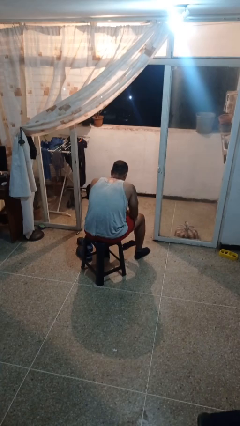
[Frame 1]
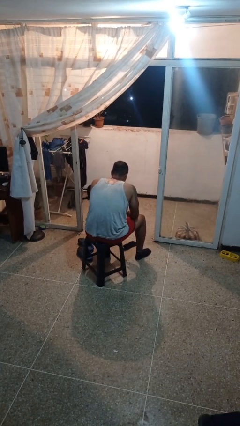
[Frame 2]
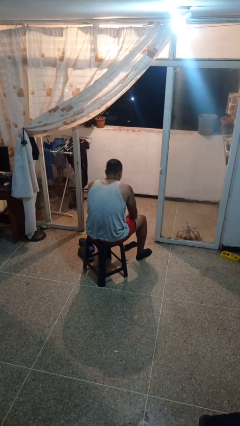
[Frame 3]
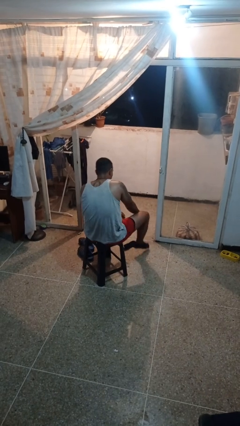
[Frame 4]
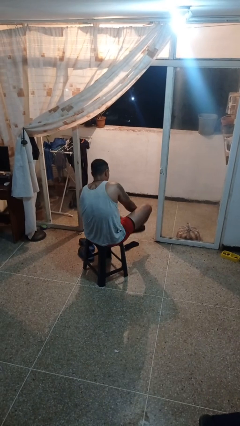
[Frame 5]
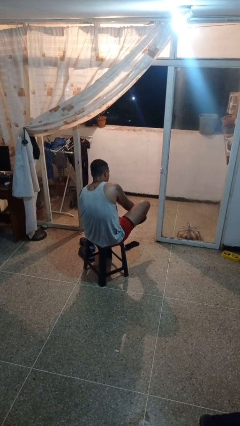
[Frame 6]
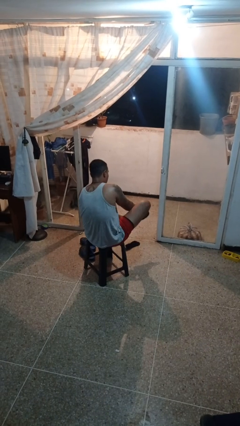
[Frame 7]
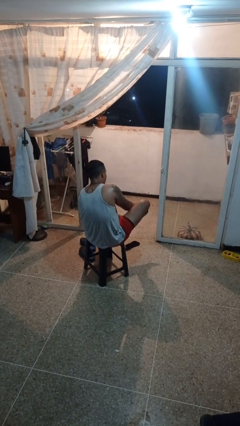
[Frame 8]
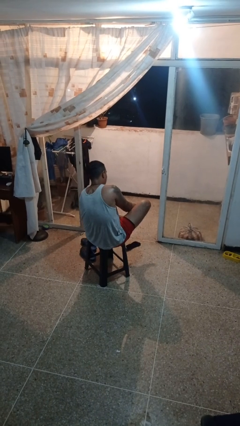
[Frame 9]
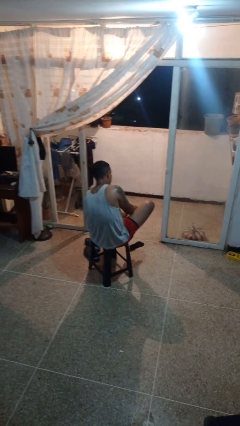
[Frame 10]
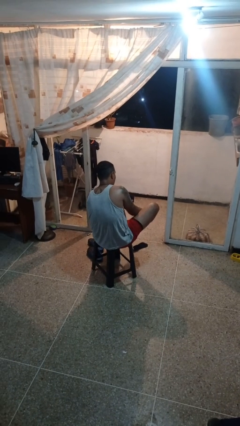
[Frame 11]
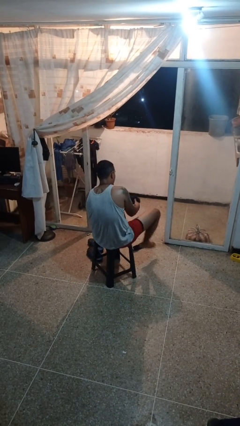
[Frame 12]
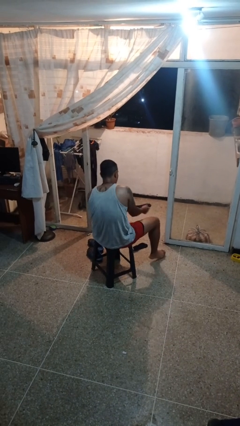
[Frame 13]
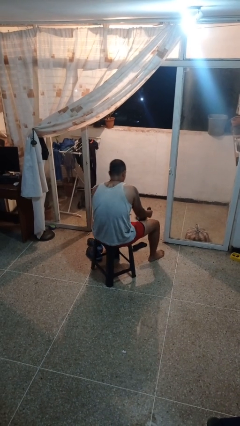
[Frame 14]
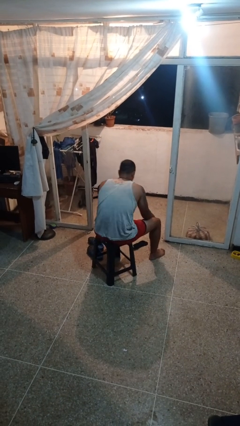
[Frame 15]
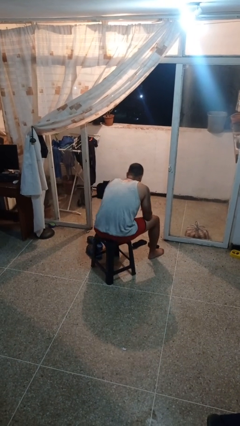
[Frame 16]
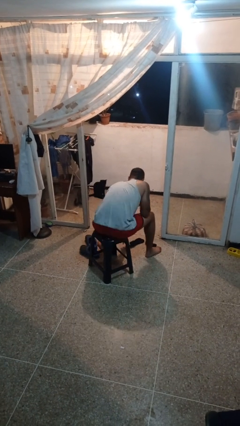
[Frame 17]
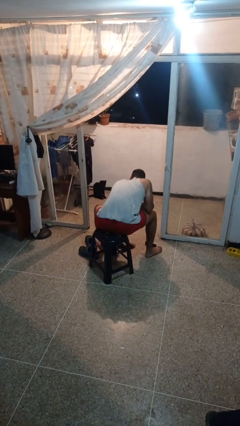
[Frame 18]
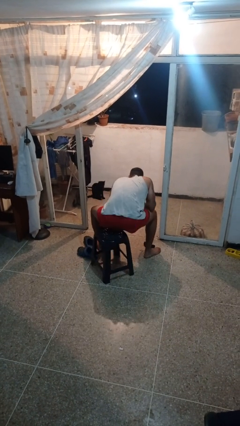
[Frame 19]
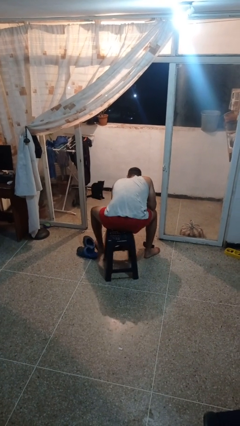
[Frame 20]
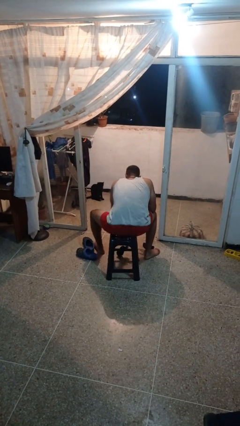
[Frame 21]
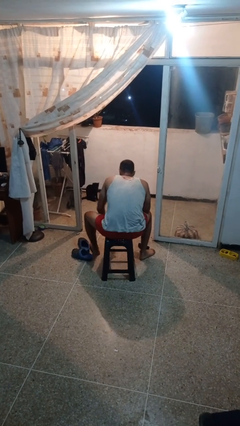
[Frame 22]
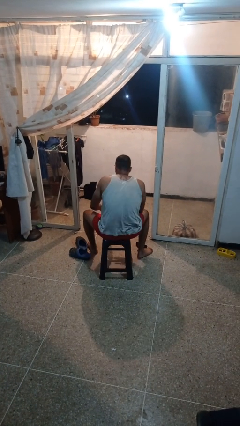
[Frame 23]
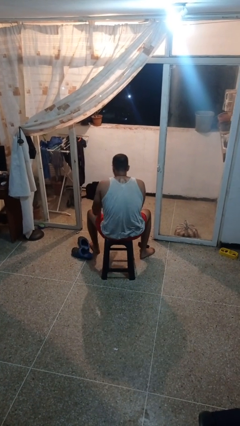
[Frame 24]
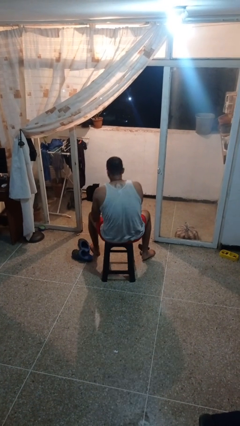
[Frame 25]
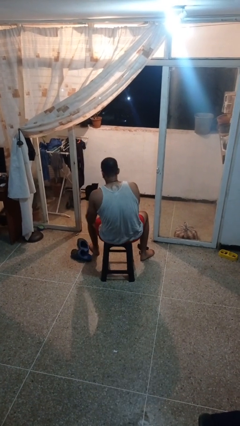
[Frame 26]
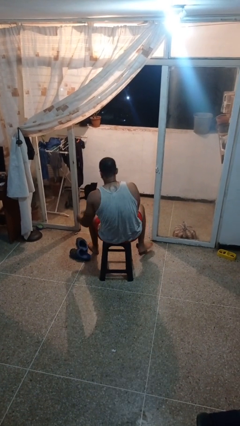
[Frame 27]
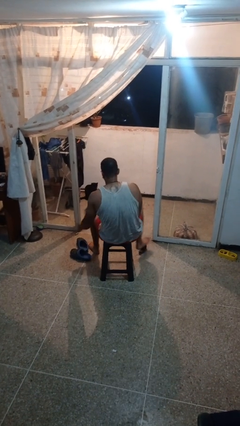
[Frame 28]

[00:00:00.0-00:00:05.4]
person takes off socks

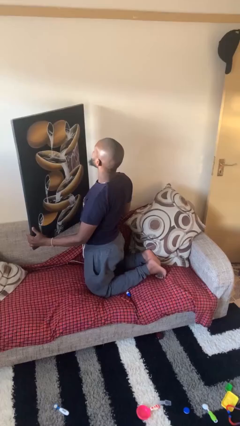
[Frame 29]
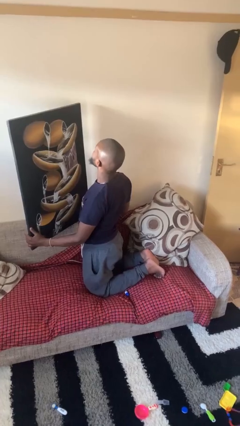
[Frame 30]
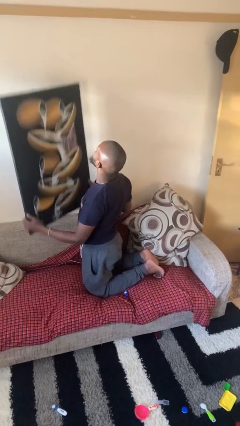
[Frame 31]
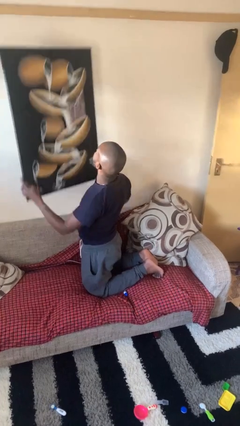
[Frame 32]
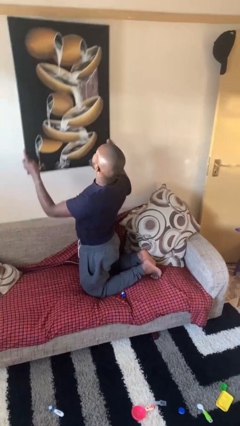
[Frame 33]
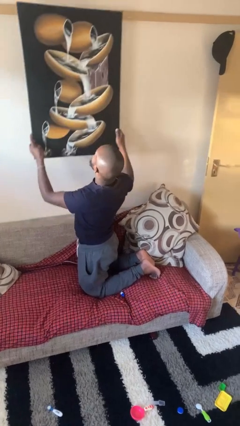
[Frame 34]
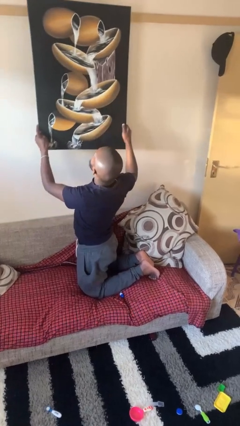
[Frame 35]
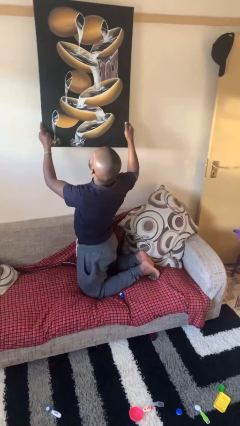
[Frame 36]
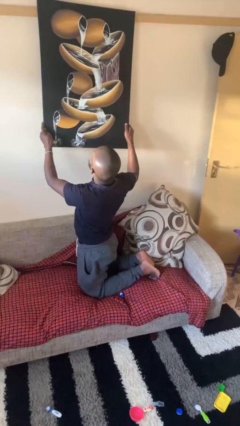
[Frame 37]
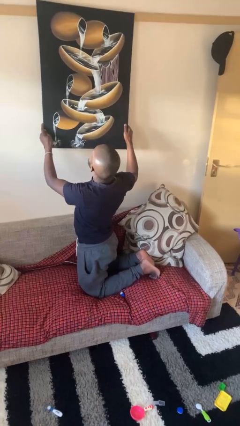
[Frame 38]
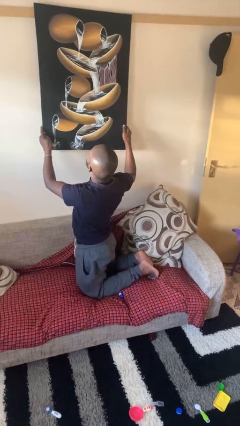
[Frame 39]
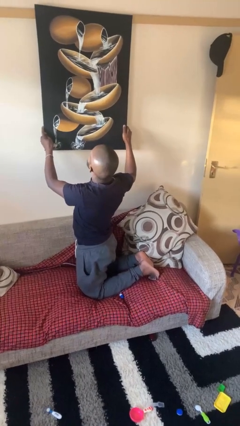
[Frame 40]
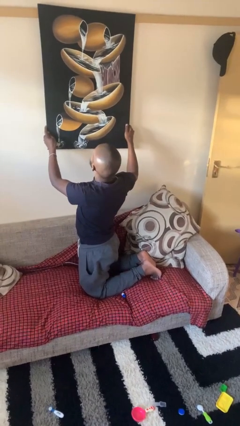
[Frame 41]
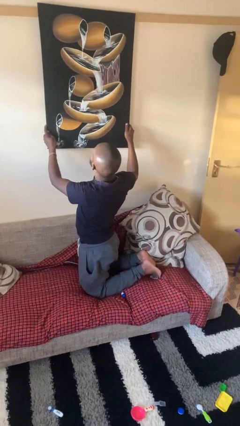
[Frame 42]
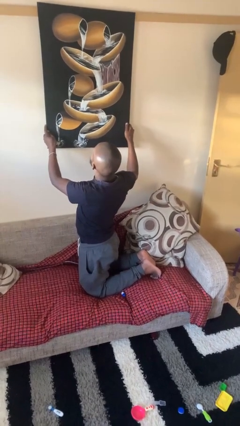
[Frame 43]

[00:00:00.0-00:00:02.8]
person puts up picture frame

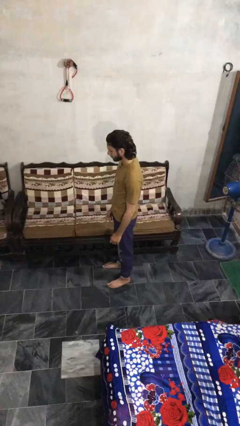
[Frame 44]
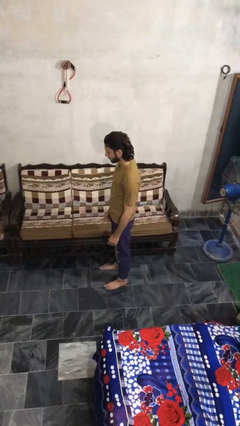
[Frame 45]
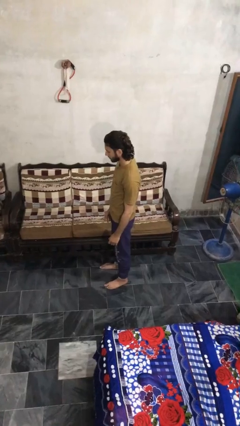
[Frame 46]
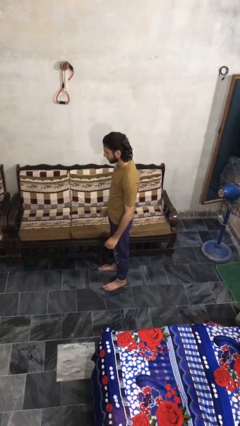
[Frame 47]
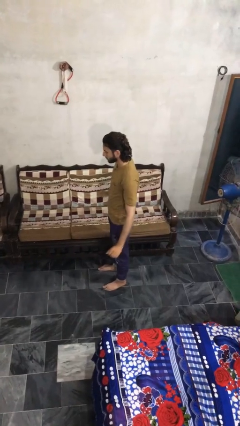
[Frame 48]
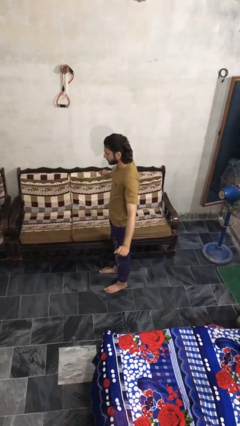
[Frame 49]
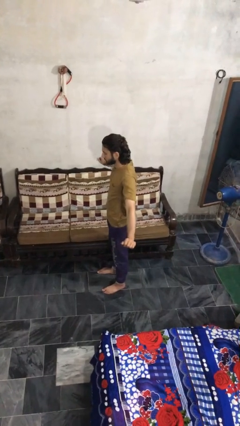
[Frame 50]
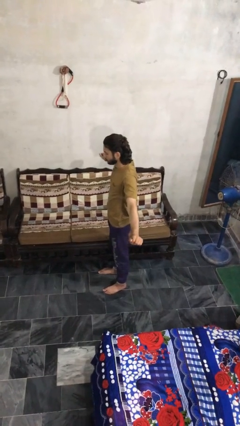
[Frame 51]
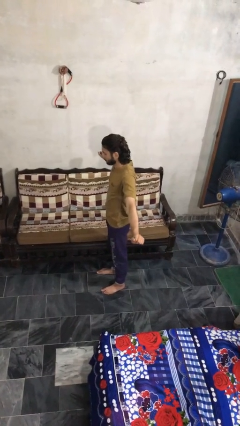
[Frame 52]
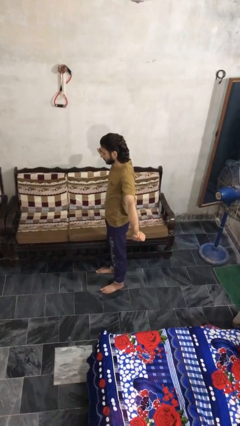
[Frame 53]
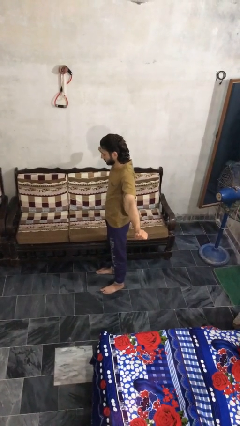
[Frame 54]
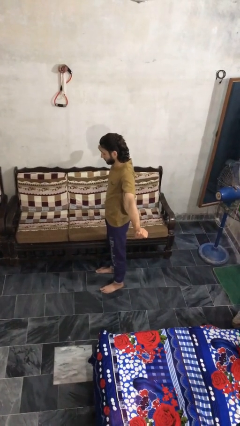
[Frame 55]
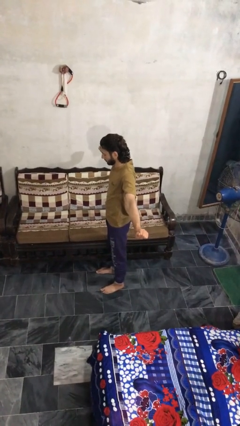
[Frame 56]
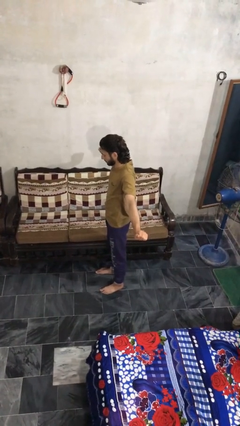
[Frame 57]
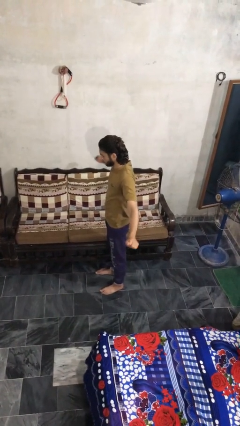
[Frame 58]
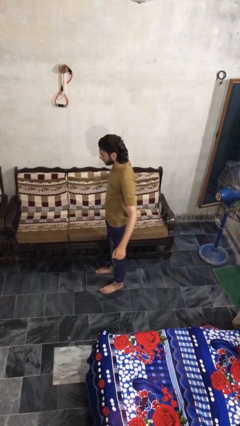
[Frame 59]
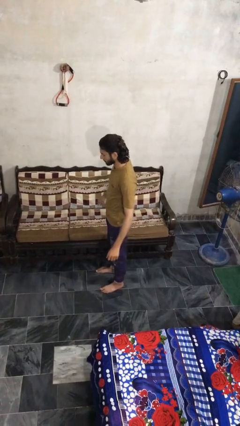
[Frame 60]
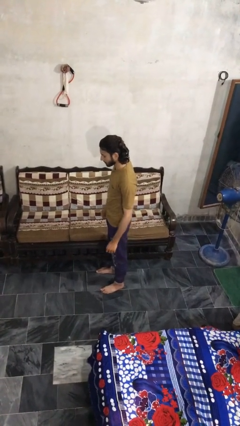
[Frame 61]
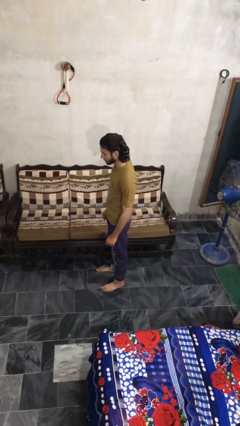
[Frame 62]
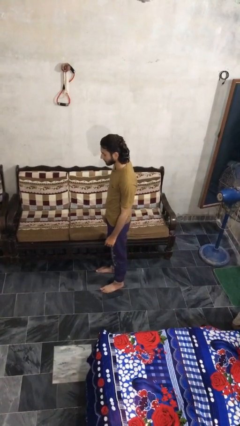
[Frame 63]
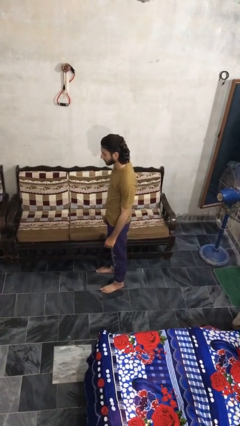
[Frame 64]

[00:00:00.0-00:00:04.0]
person stretches arms to side

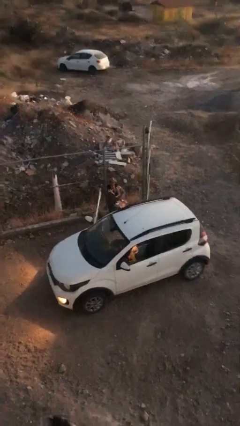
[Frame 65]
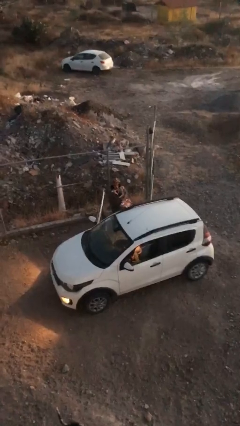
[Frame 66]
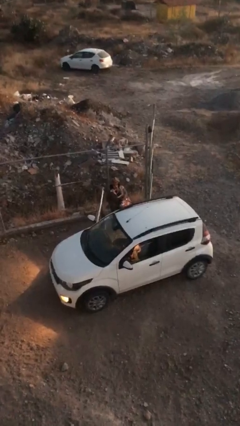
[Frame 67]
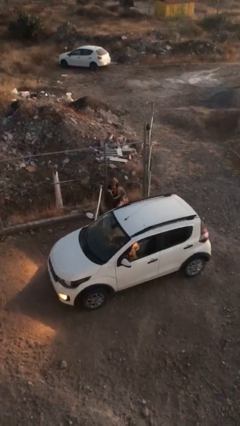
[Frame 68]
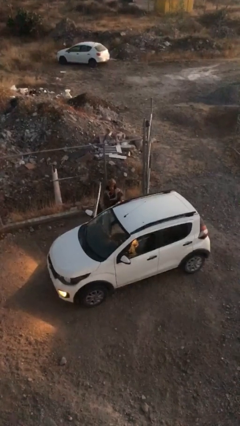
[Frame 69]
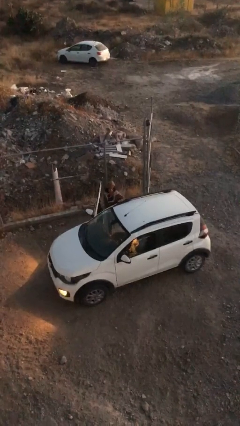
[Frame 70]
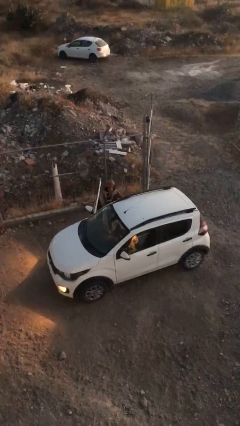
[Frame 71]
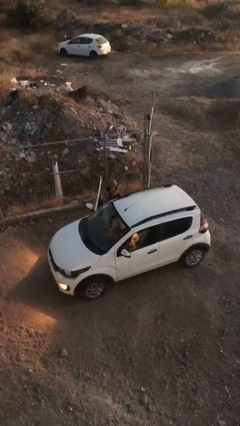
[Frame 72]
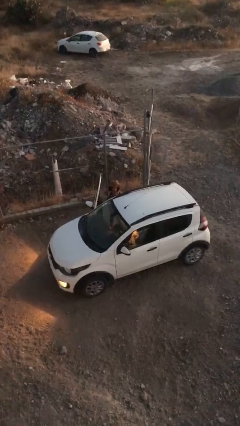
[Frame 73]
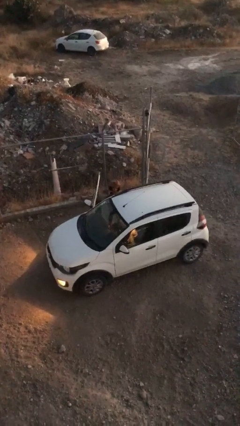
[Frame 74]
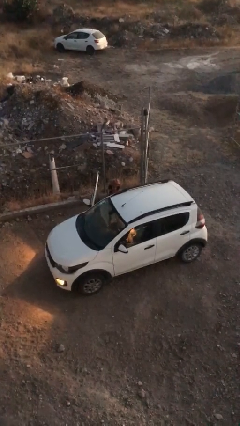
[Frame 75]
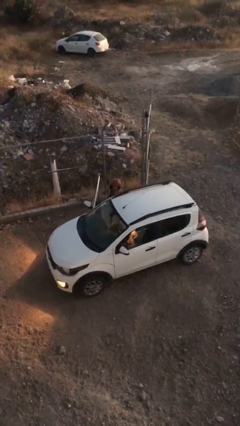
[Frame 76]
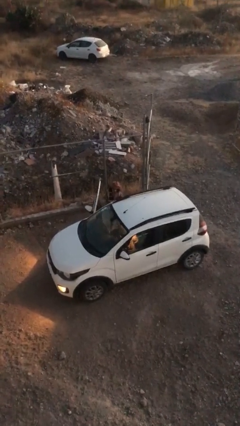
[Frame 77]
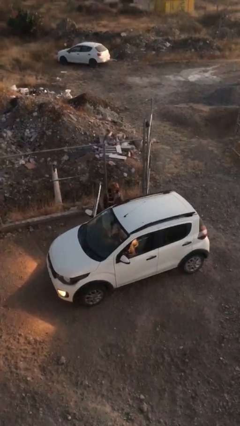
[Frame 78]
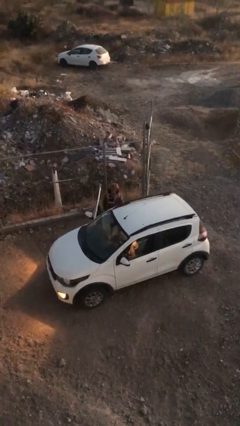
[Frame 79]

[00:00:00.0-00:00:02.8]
person loads car

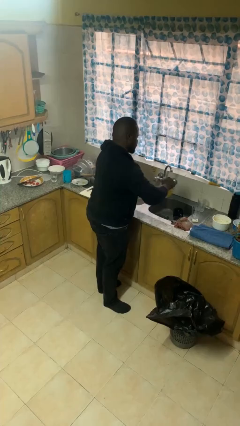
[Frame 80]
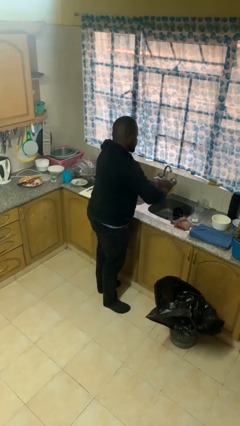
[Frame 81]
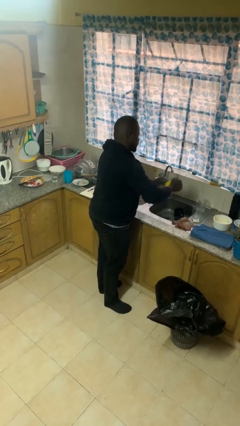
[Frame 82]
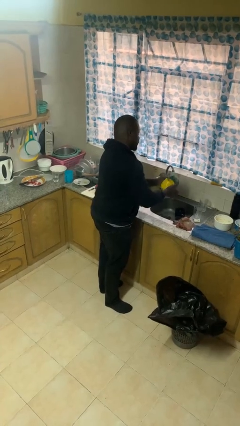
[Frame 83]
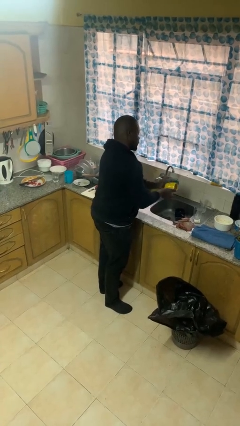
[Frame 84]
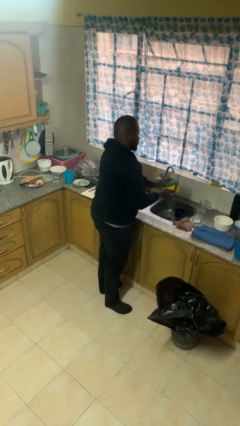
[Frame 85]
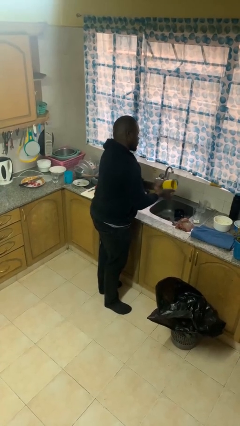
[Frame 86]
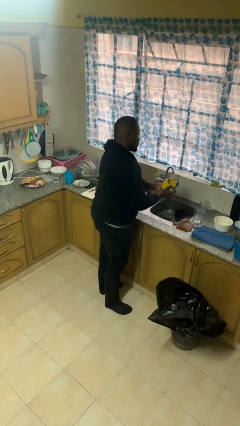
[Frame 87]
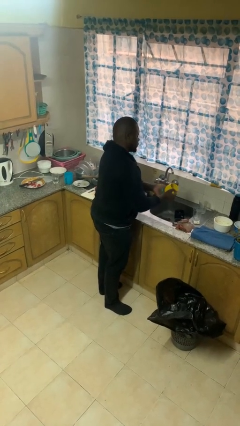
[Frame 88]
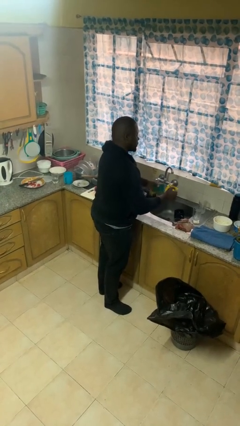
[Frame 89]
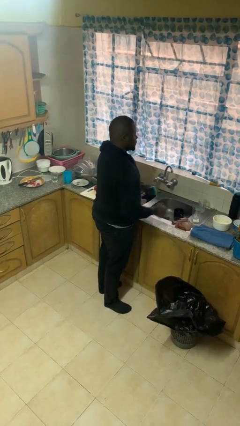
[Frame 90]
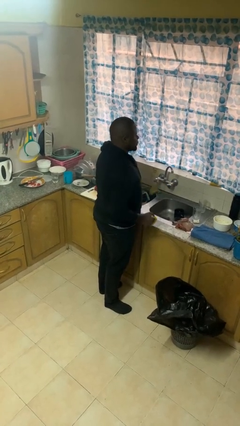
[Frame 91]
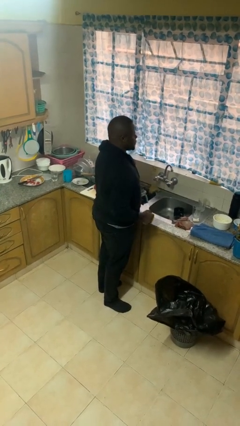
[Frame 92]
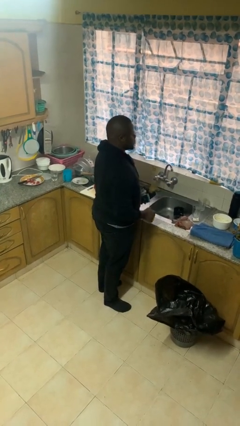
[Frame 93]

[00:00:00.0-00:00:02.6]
person washes dish

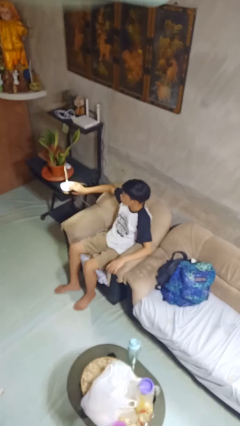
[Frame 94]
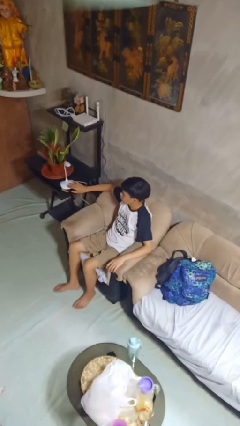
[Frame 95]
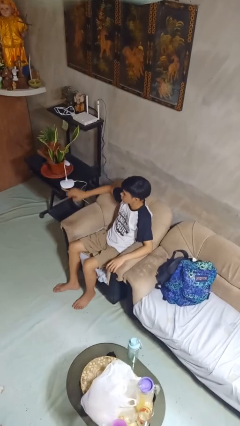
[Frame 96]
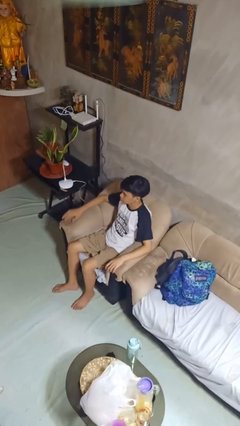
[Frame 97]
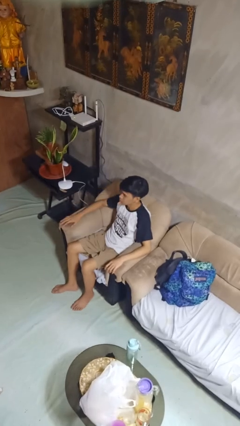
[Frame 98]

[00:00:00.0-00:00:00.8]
person turns off lamp
